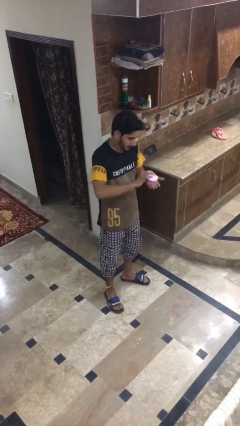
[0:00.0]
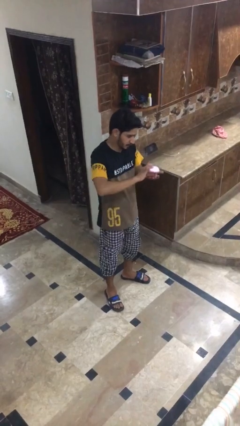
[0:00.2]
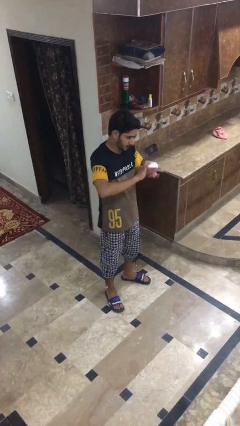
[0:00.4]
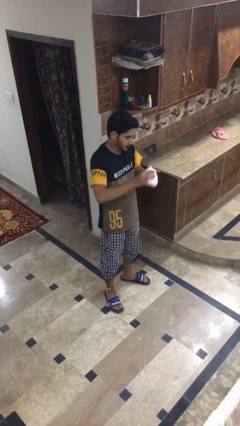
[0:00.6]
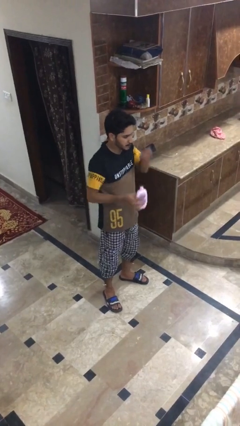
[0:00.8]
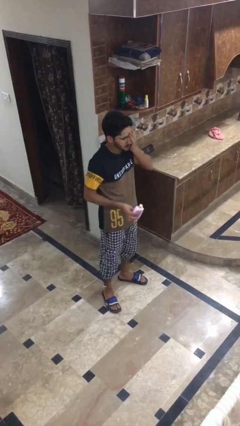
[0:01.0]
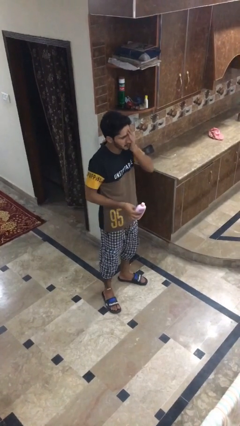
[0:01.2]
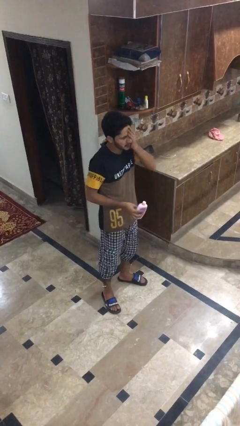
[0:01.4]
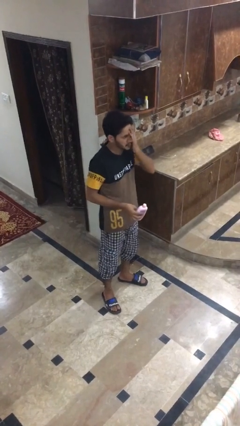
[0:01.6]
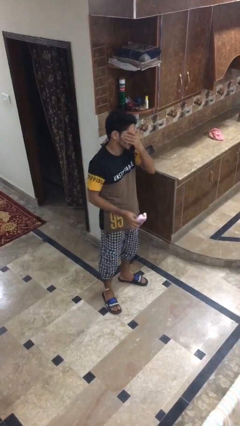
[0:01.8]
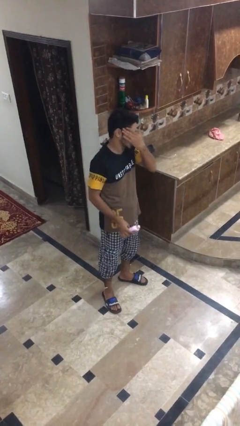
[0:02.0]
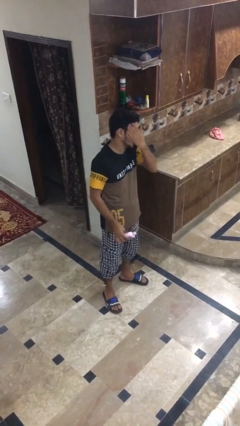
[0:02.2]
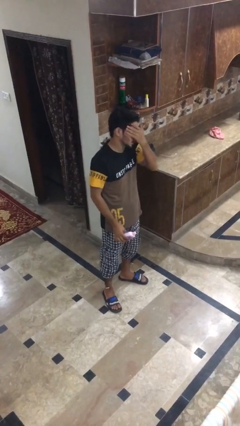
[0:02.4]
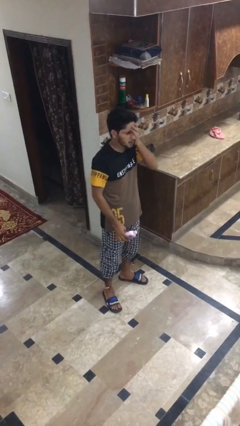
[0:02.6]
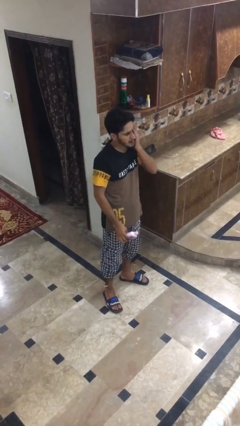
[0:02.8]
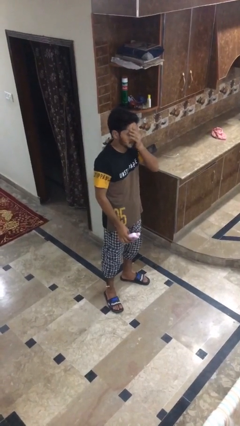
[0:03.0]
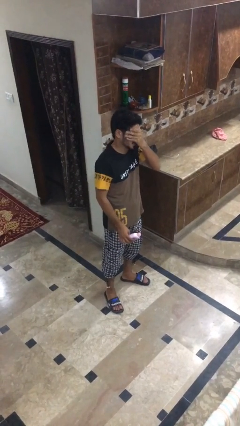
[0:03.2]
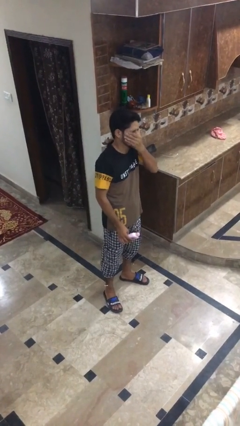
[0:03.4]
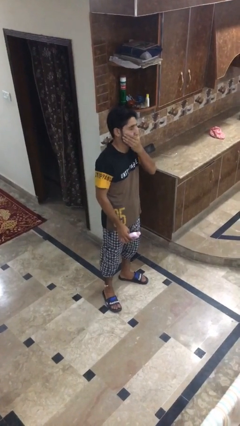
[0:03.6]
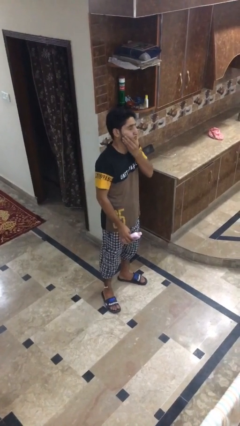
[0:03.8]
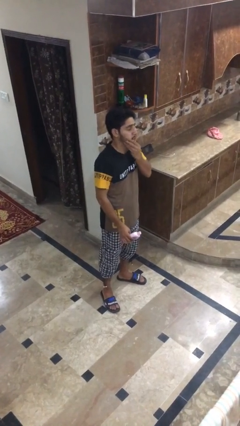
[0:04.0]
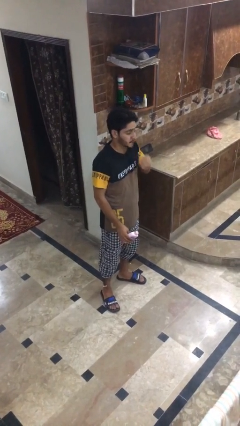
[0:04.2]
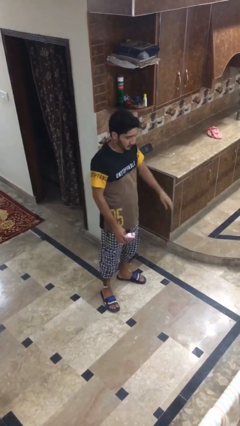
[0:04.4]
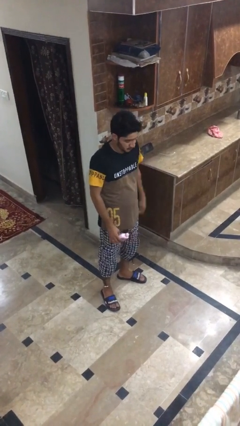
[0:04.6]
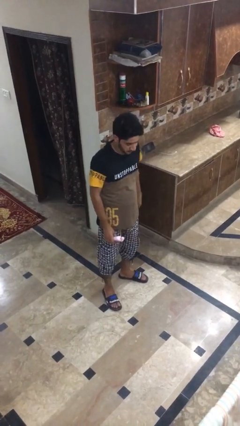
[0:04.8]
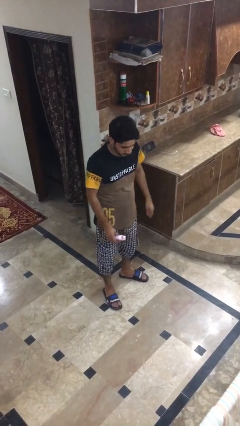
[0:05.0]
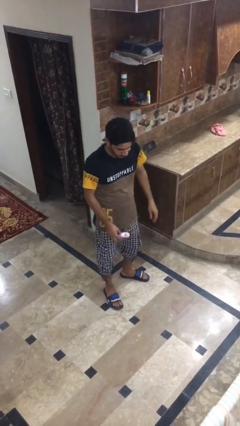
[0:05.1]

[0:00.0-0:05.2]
person applies facial moisturizer

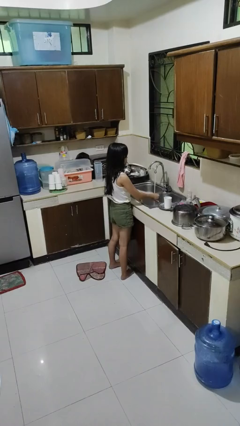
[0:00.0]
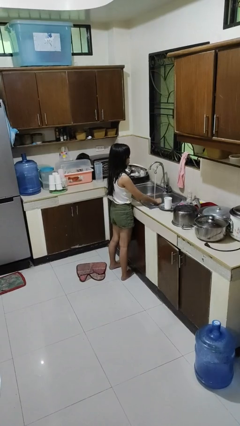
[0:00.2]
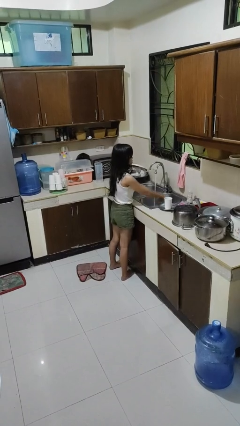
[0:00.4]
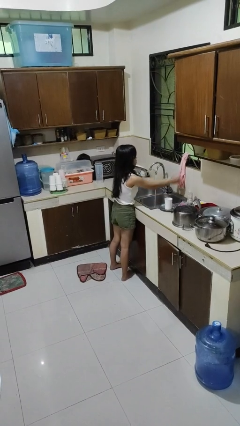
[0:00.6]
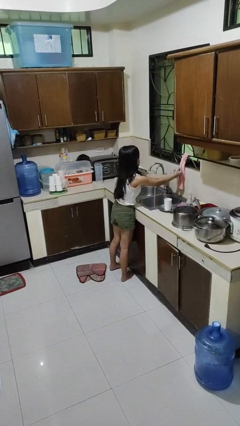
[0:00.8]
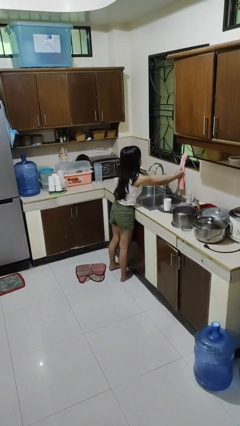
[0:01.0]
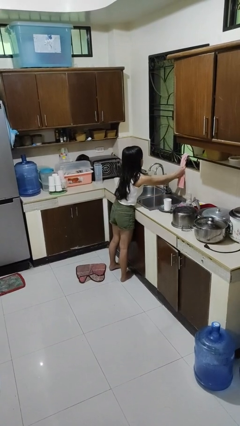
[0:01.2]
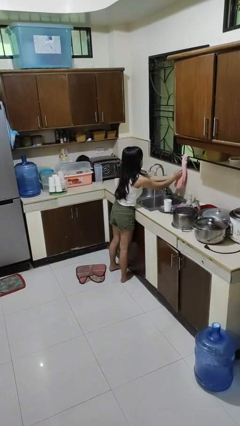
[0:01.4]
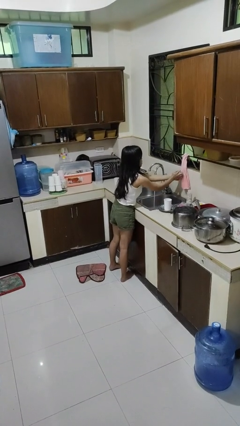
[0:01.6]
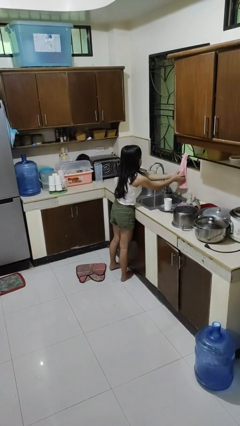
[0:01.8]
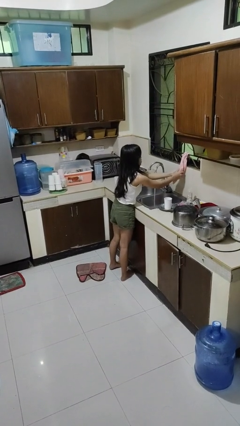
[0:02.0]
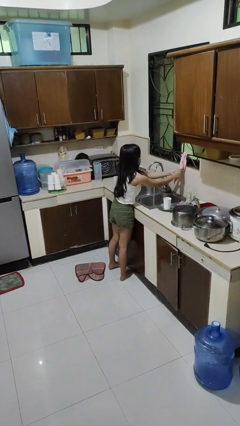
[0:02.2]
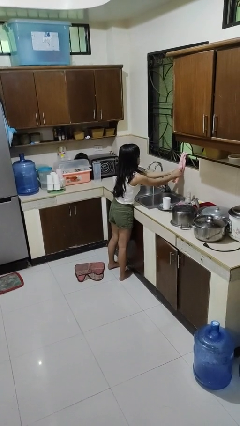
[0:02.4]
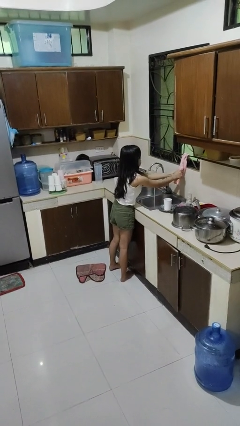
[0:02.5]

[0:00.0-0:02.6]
person dries hands with towel

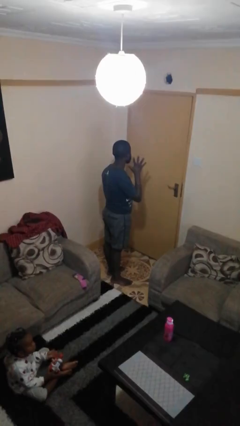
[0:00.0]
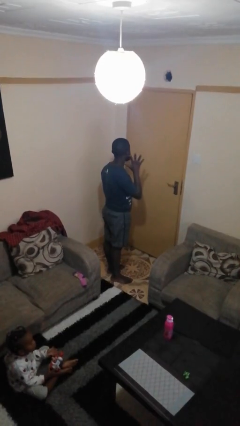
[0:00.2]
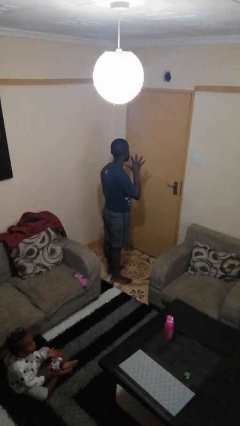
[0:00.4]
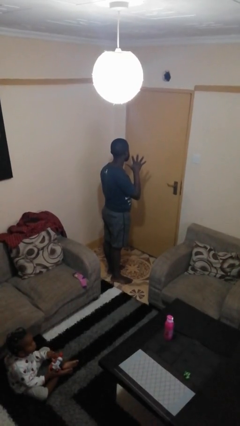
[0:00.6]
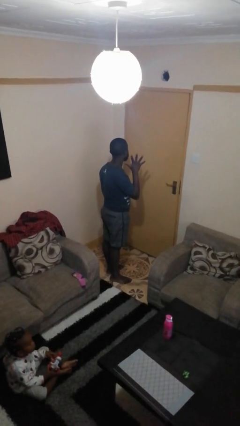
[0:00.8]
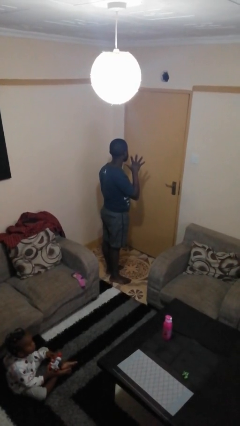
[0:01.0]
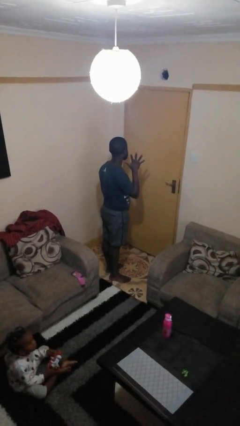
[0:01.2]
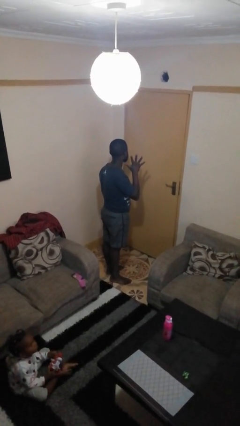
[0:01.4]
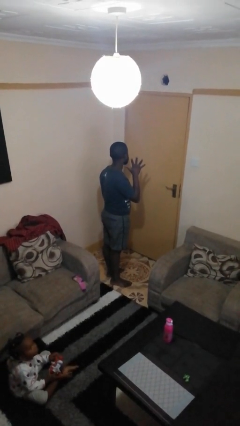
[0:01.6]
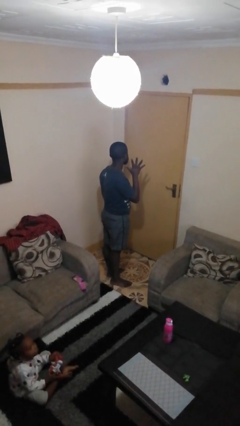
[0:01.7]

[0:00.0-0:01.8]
person gestures number five

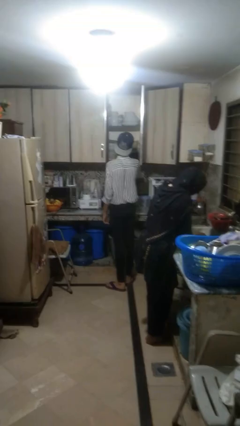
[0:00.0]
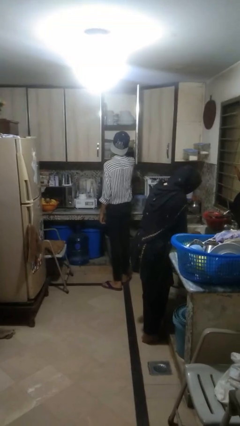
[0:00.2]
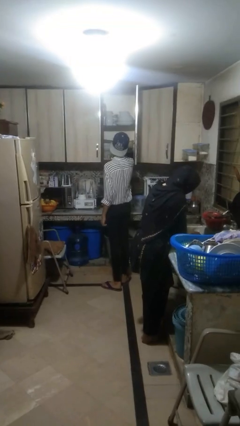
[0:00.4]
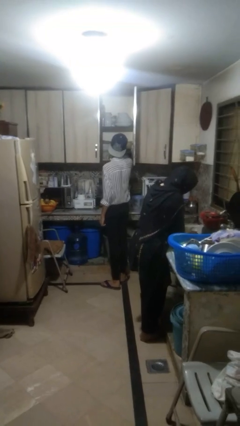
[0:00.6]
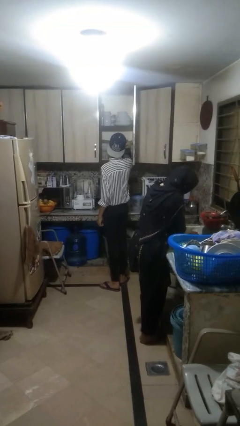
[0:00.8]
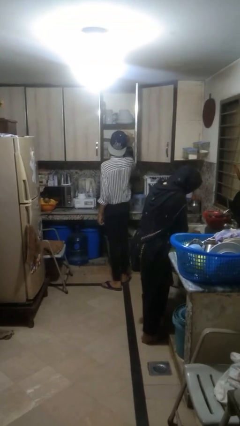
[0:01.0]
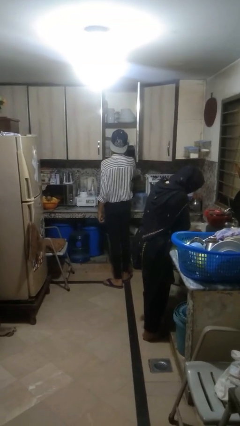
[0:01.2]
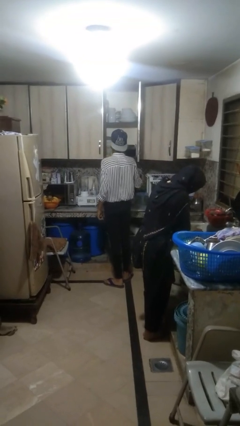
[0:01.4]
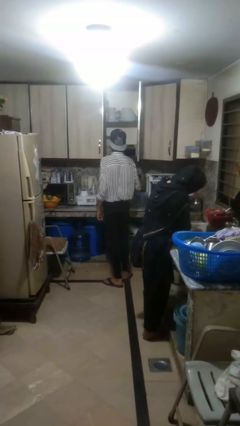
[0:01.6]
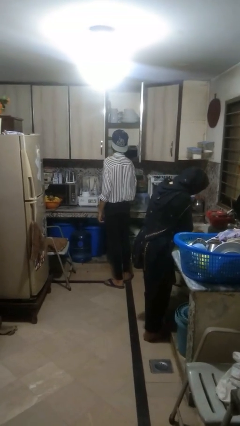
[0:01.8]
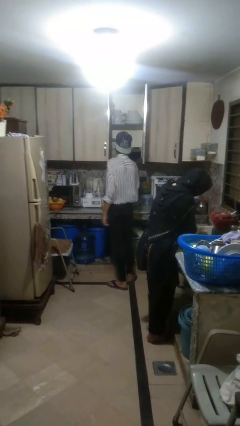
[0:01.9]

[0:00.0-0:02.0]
person takes object from cabinet

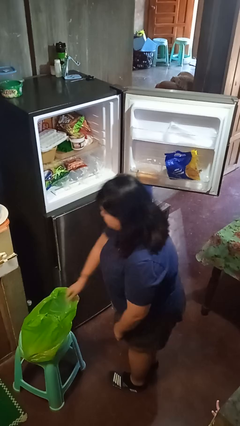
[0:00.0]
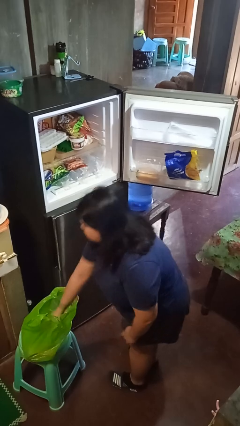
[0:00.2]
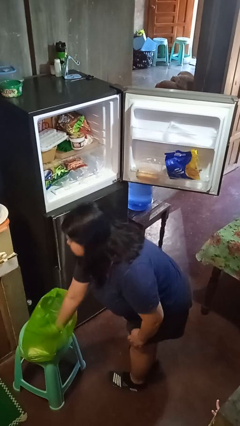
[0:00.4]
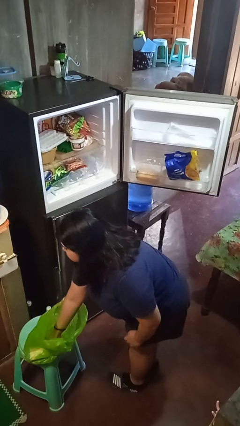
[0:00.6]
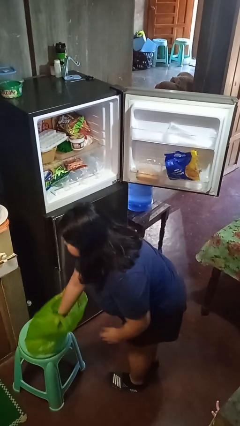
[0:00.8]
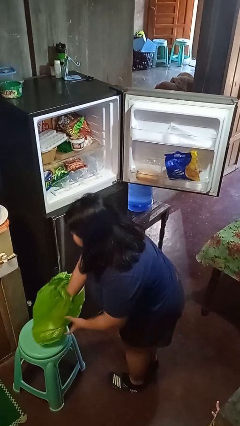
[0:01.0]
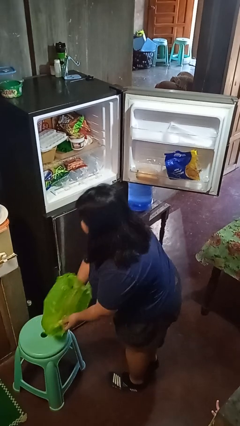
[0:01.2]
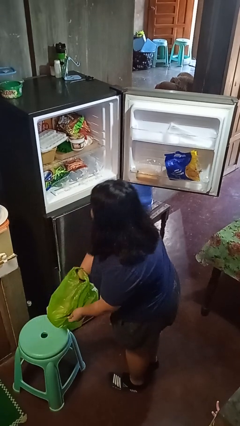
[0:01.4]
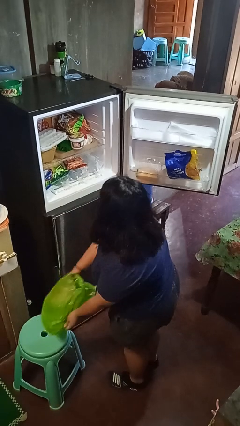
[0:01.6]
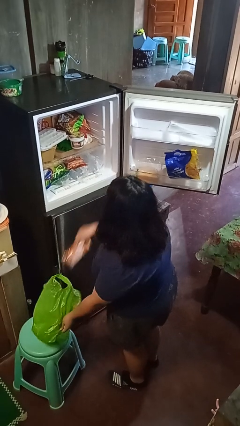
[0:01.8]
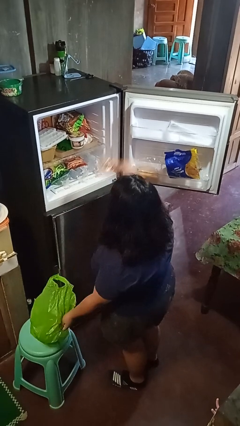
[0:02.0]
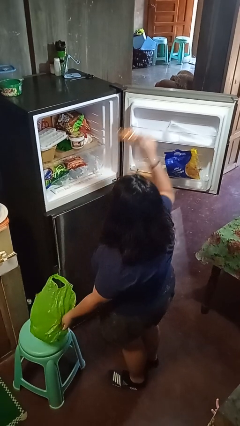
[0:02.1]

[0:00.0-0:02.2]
person loads groceries into refrigerator

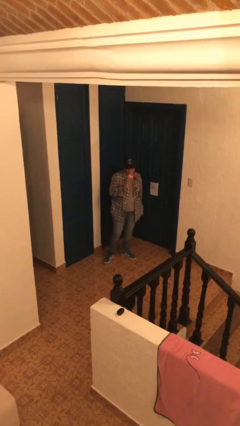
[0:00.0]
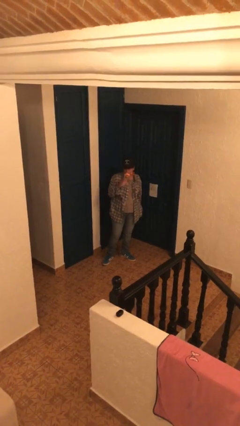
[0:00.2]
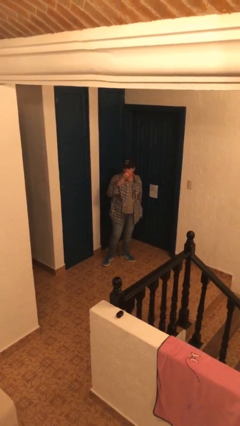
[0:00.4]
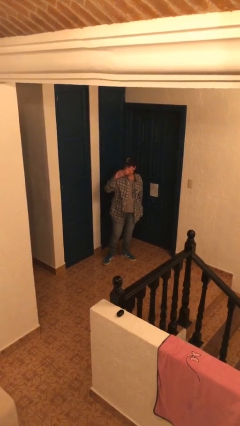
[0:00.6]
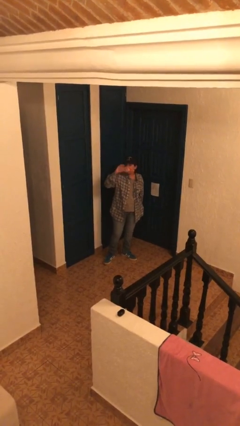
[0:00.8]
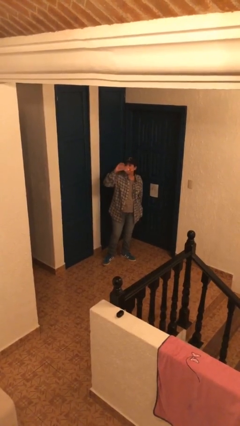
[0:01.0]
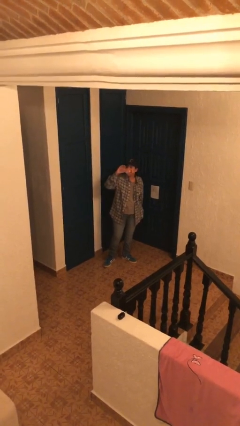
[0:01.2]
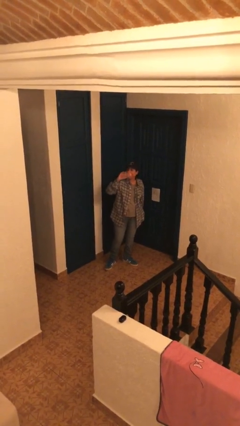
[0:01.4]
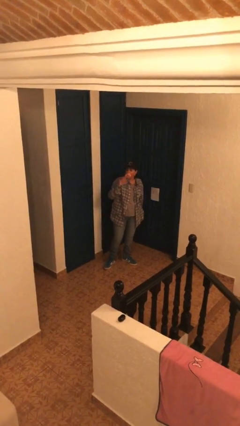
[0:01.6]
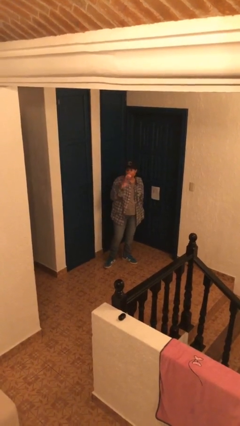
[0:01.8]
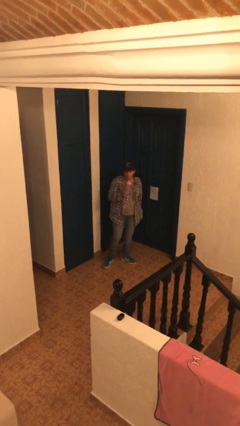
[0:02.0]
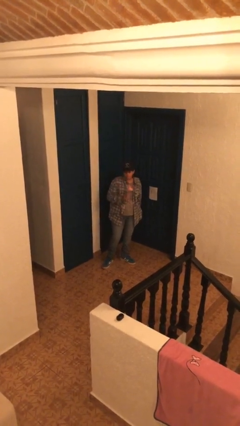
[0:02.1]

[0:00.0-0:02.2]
person drinks from bottle

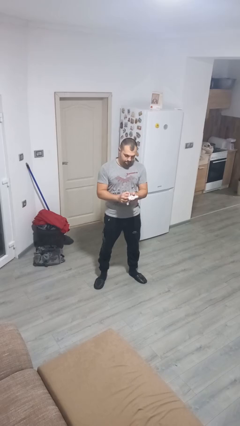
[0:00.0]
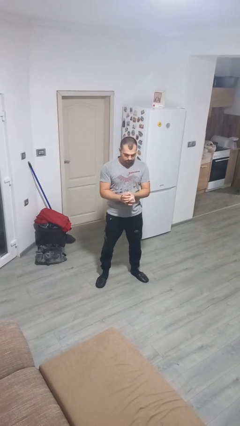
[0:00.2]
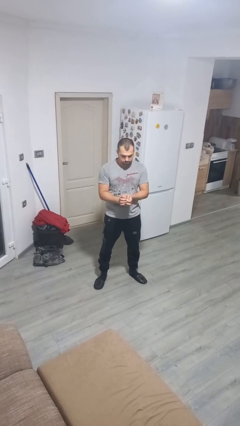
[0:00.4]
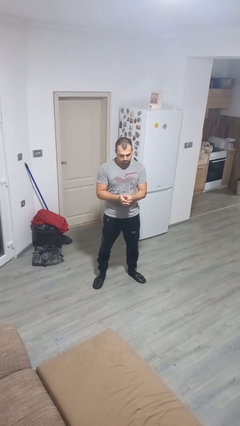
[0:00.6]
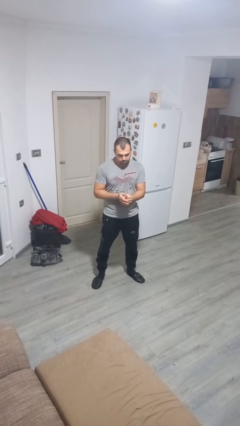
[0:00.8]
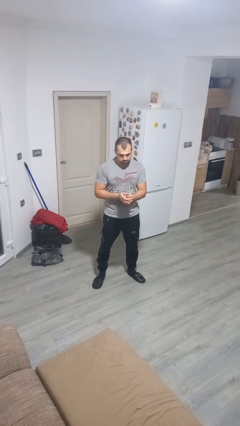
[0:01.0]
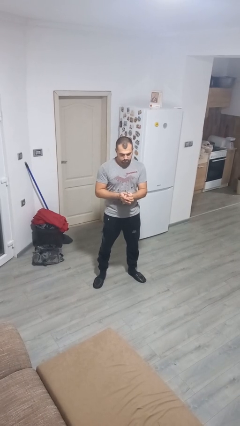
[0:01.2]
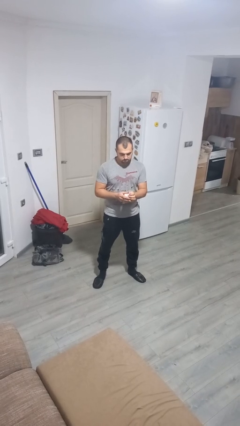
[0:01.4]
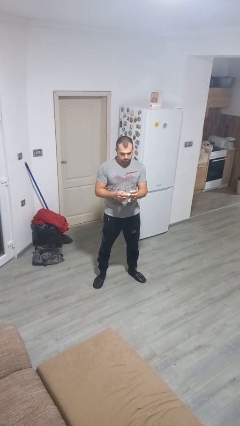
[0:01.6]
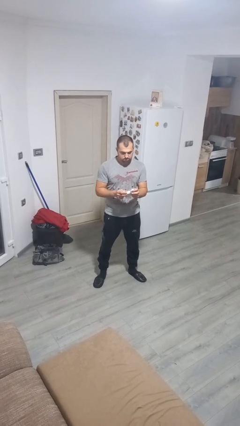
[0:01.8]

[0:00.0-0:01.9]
person crumples paper
